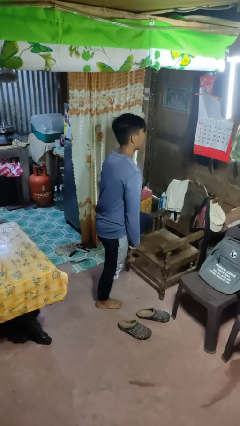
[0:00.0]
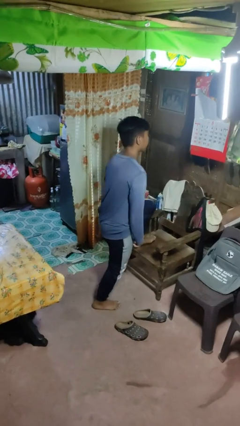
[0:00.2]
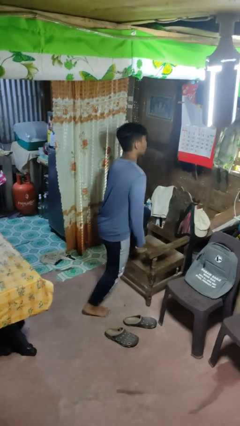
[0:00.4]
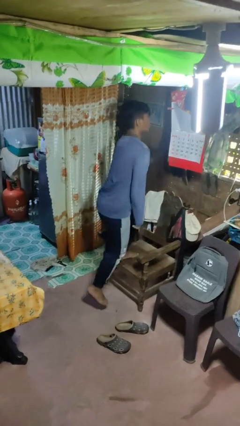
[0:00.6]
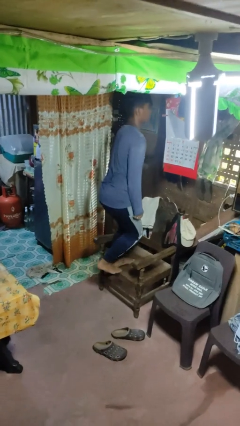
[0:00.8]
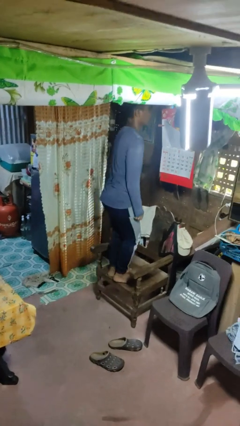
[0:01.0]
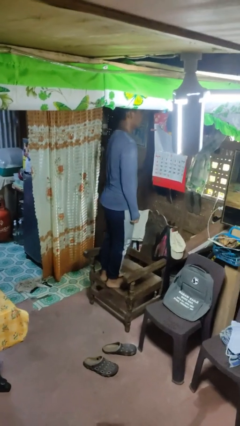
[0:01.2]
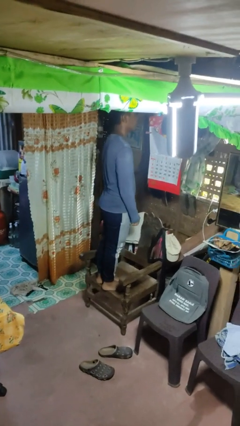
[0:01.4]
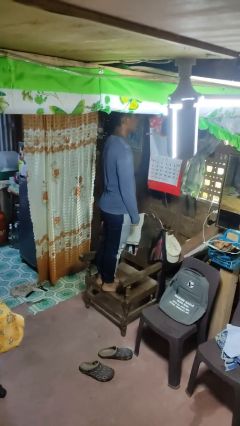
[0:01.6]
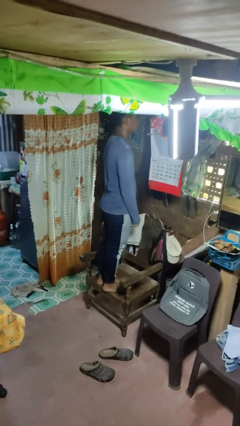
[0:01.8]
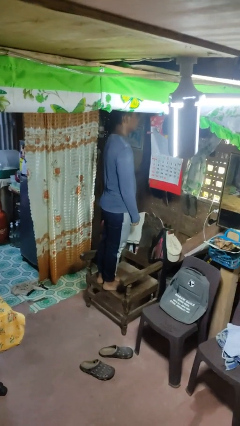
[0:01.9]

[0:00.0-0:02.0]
person climbs on chair

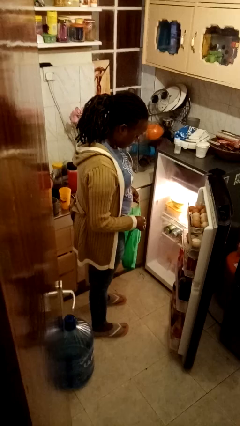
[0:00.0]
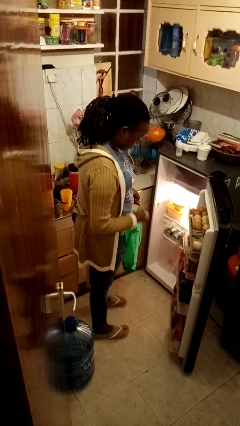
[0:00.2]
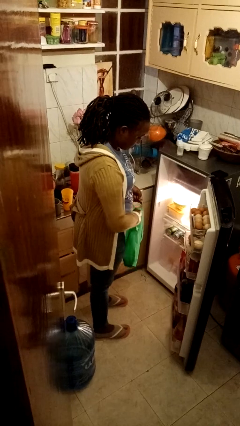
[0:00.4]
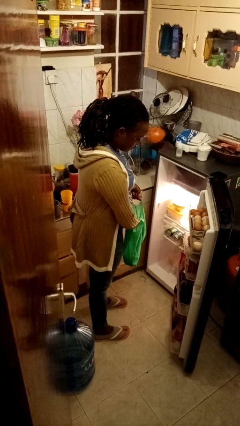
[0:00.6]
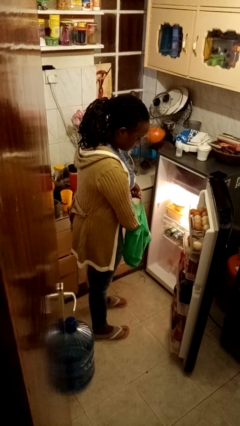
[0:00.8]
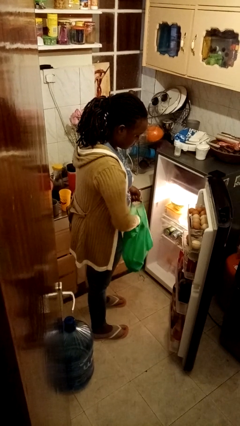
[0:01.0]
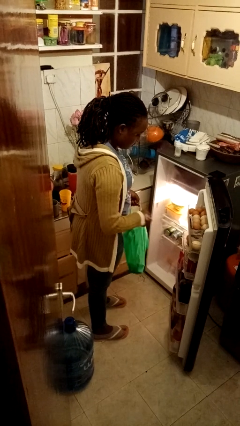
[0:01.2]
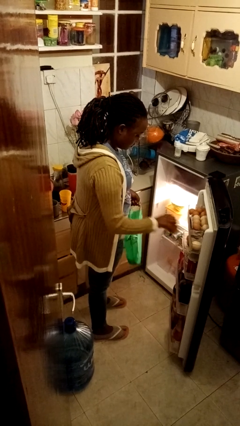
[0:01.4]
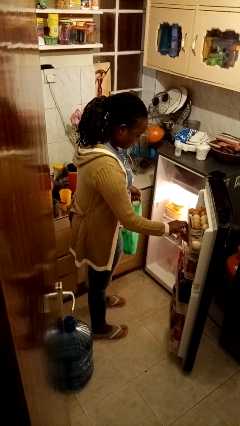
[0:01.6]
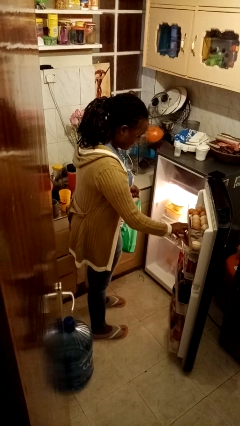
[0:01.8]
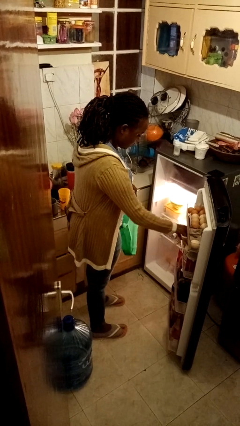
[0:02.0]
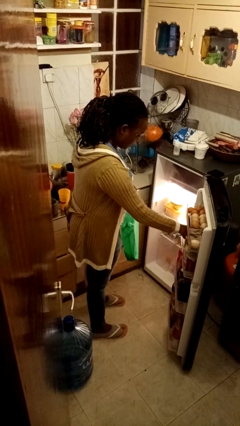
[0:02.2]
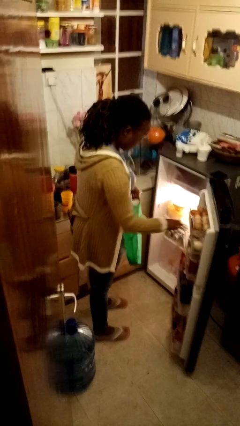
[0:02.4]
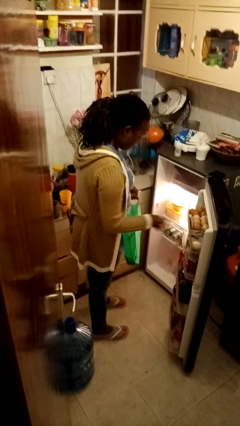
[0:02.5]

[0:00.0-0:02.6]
person loads groceries into refrigerator

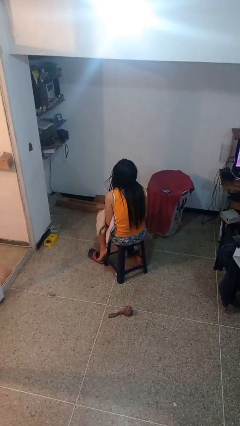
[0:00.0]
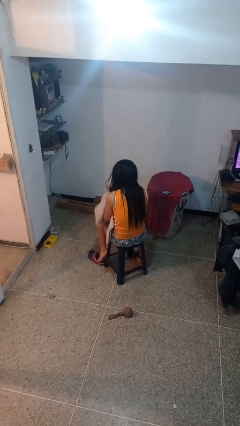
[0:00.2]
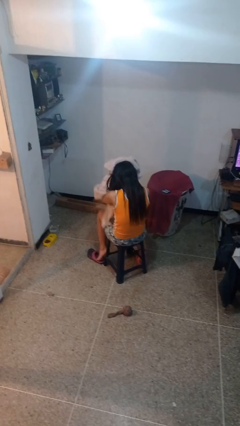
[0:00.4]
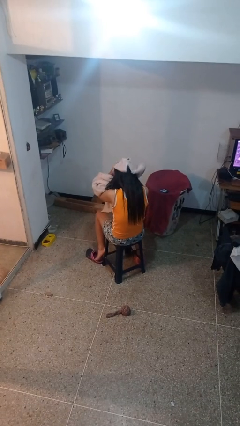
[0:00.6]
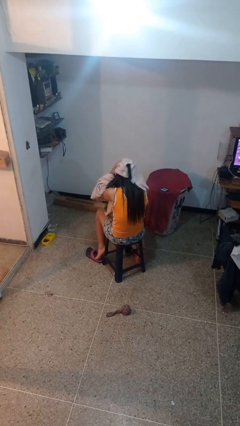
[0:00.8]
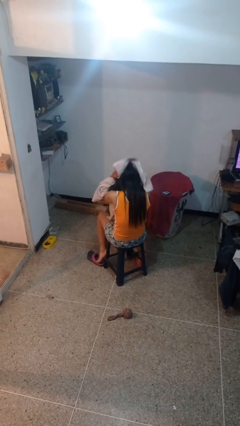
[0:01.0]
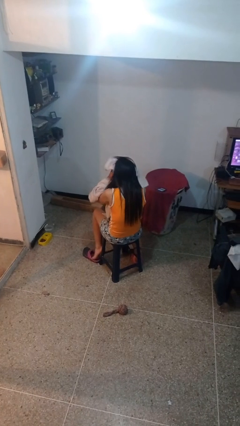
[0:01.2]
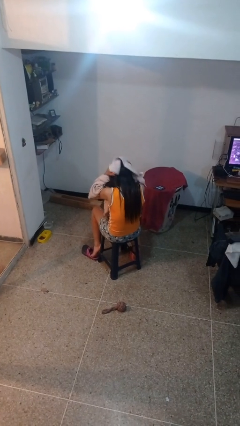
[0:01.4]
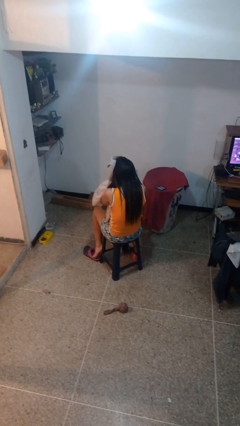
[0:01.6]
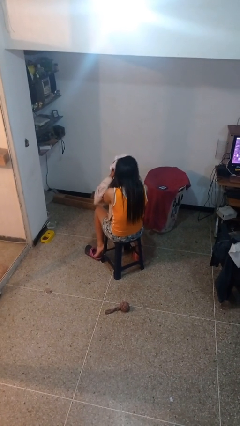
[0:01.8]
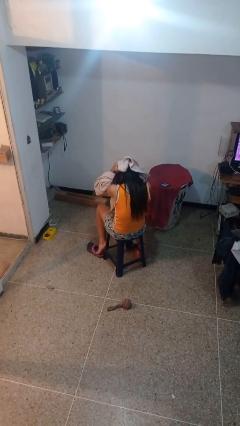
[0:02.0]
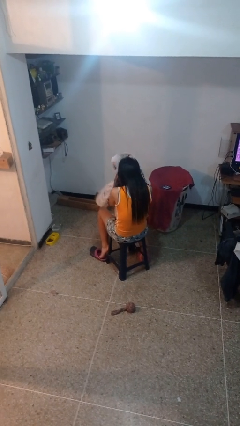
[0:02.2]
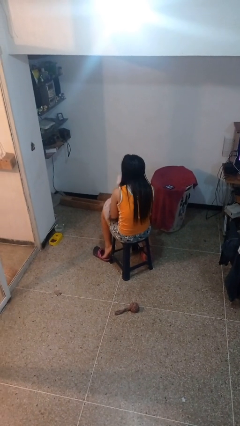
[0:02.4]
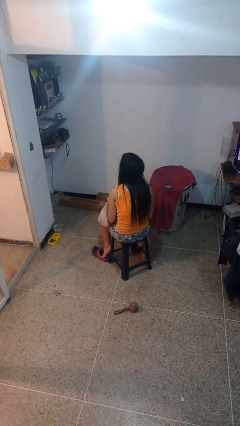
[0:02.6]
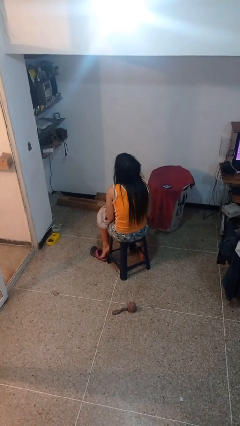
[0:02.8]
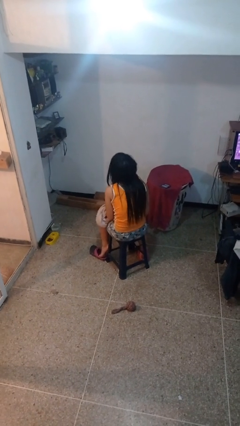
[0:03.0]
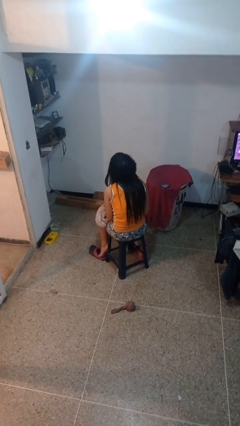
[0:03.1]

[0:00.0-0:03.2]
person dries hair with towel

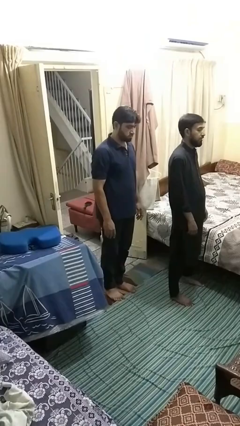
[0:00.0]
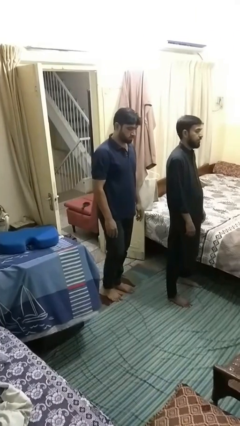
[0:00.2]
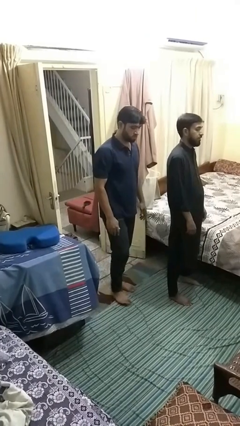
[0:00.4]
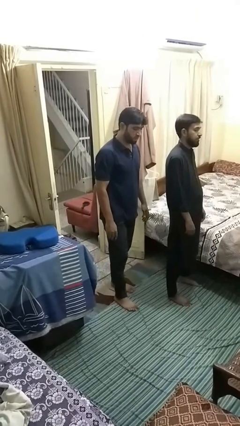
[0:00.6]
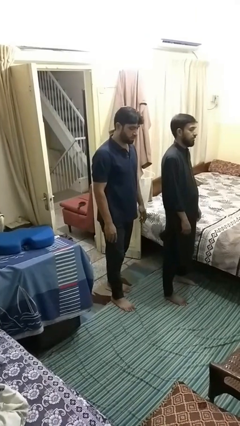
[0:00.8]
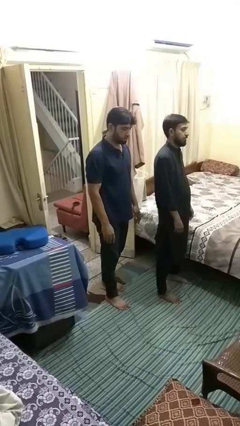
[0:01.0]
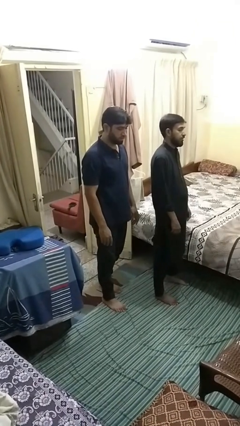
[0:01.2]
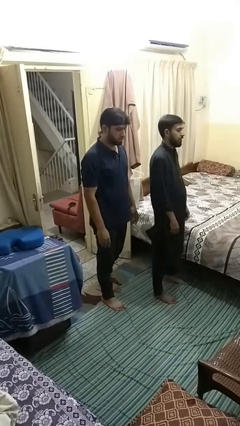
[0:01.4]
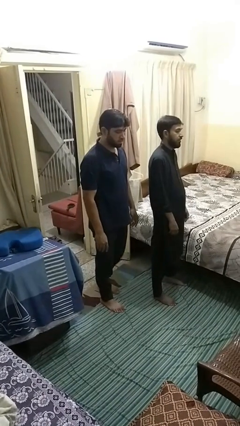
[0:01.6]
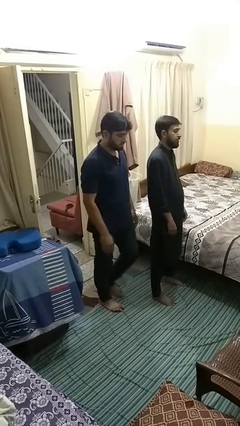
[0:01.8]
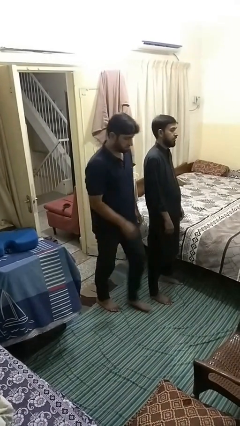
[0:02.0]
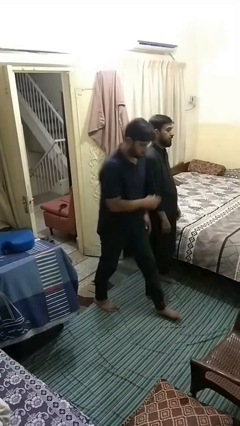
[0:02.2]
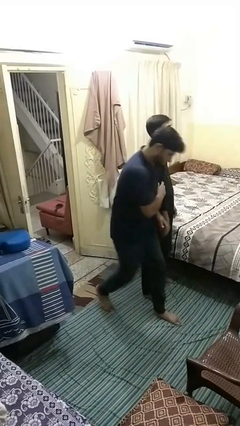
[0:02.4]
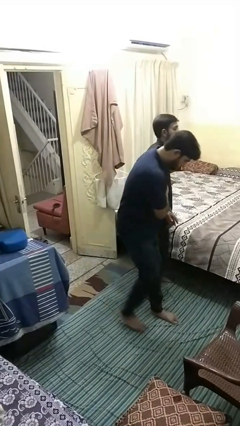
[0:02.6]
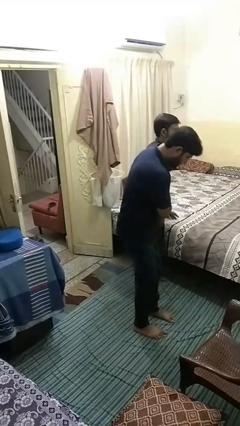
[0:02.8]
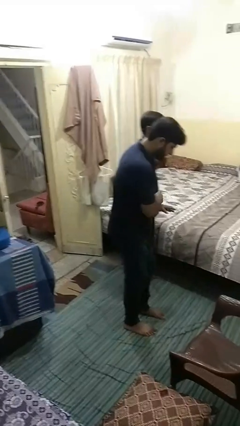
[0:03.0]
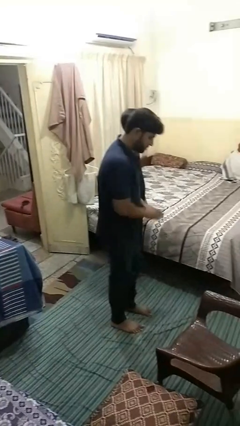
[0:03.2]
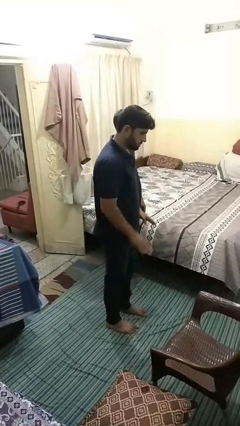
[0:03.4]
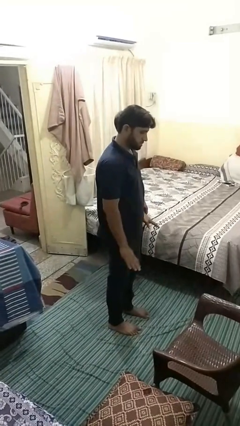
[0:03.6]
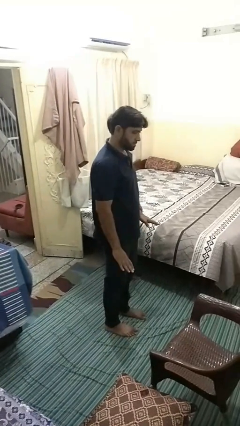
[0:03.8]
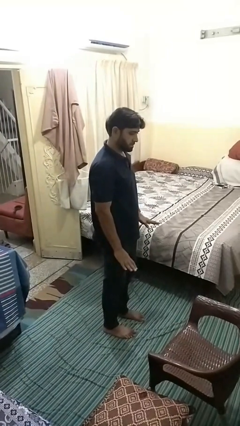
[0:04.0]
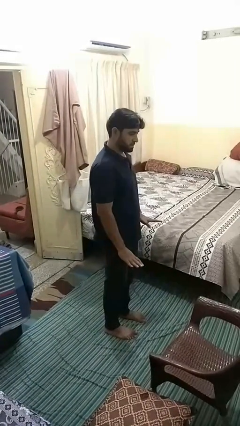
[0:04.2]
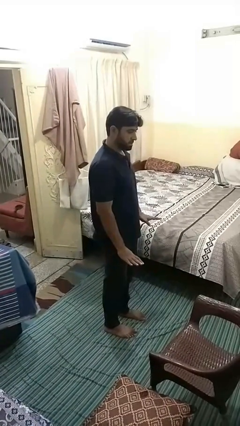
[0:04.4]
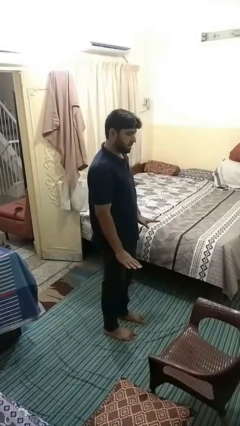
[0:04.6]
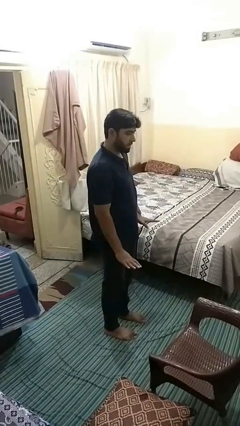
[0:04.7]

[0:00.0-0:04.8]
person bumps into person

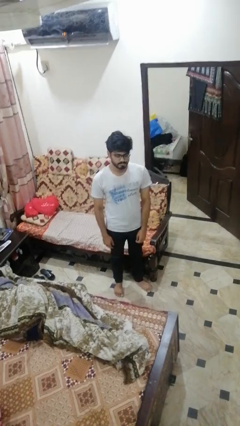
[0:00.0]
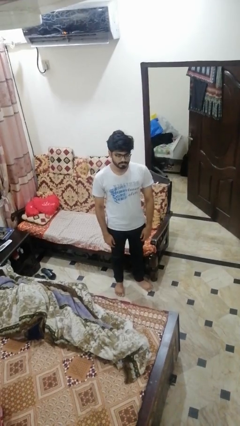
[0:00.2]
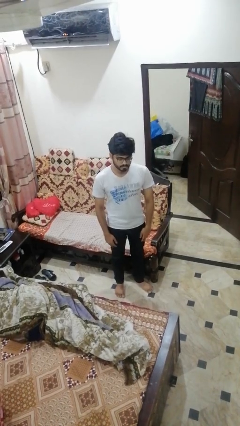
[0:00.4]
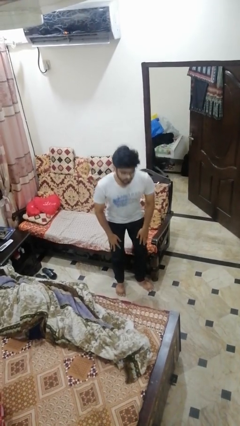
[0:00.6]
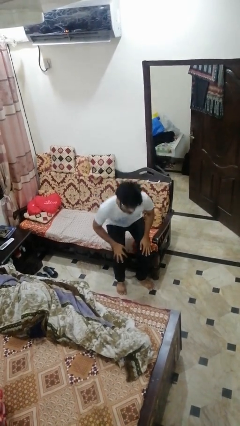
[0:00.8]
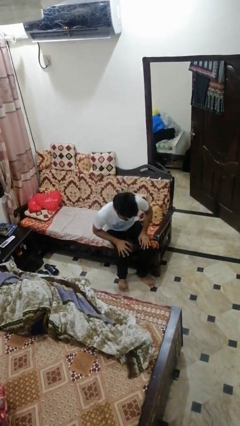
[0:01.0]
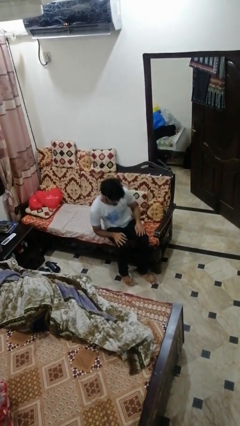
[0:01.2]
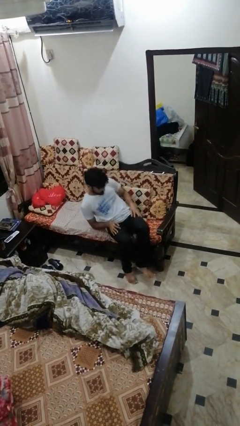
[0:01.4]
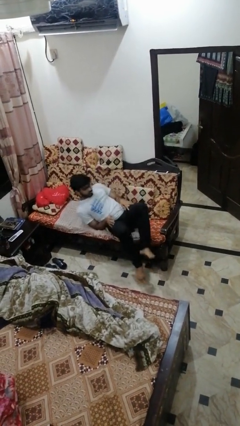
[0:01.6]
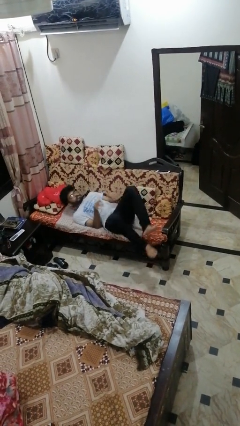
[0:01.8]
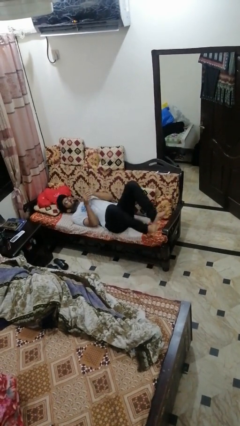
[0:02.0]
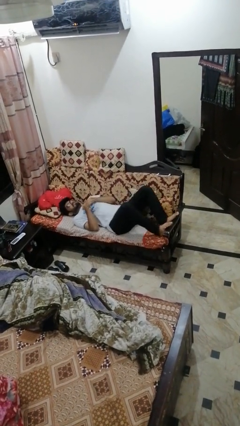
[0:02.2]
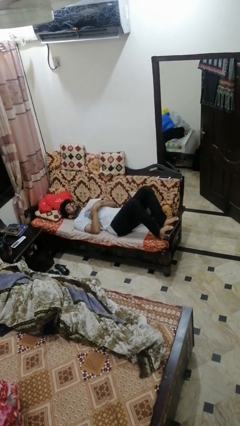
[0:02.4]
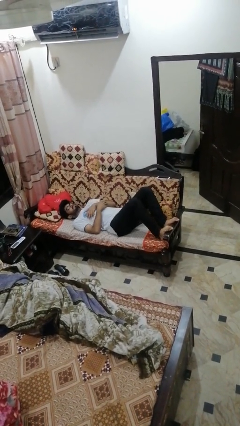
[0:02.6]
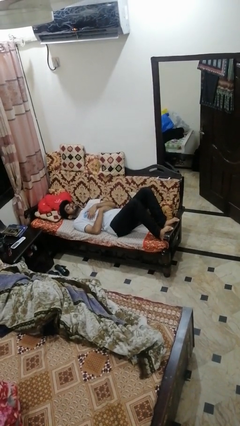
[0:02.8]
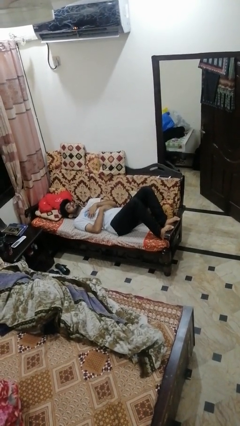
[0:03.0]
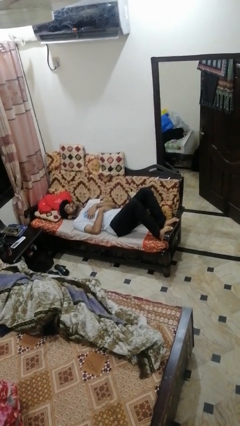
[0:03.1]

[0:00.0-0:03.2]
person lies down on couch

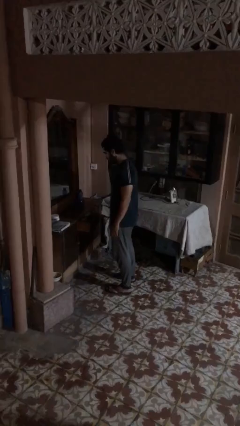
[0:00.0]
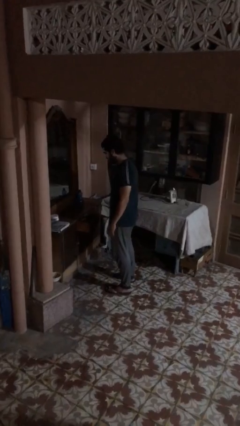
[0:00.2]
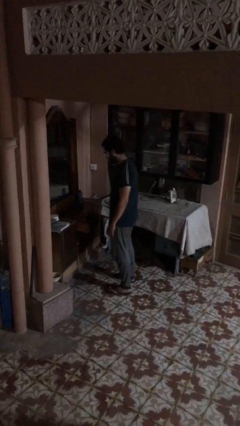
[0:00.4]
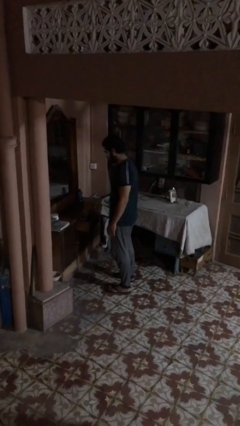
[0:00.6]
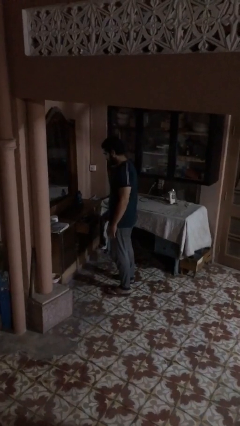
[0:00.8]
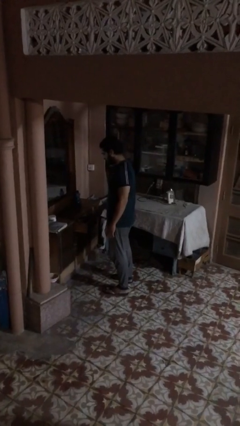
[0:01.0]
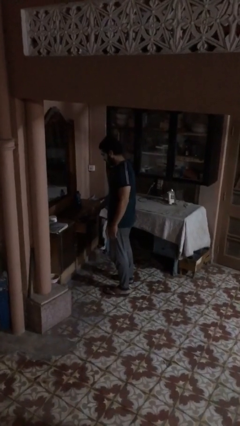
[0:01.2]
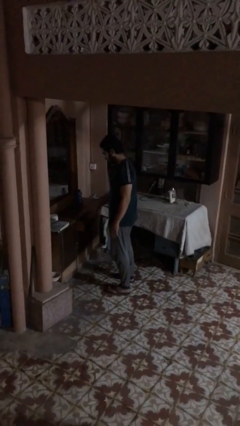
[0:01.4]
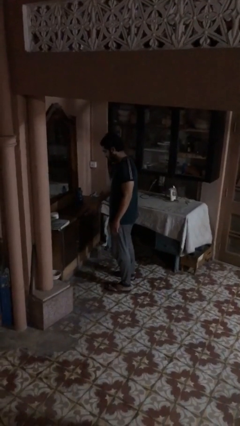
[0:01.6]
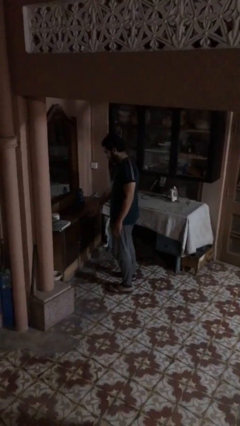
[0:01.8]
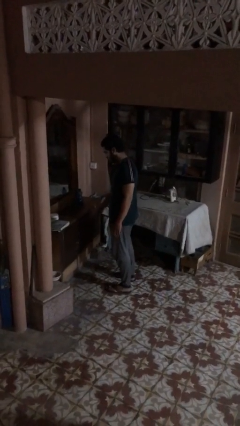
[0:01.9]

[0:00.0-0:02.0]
person closes dresser drawer
